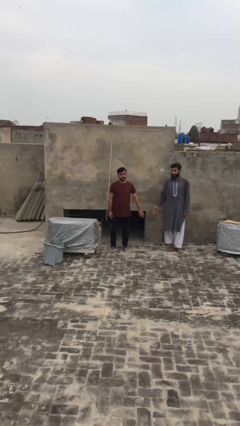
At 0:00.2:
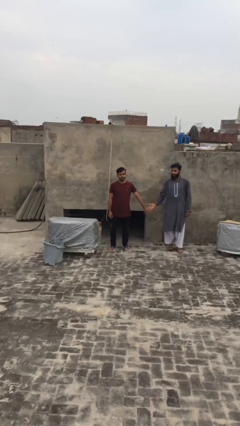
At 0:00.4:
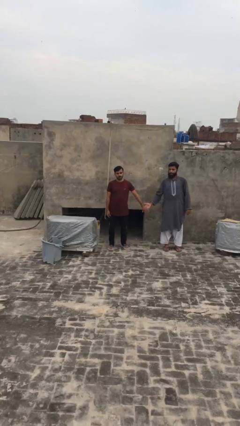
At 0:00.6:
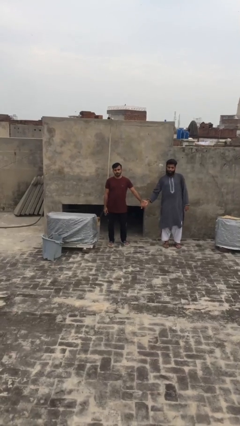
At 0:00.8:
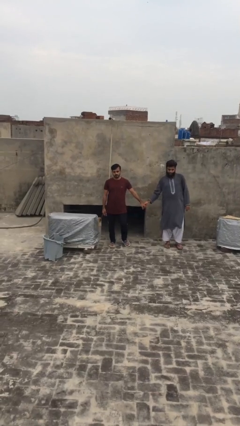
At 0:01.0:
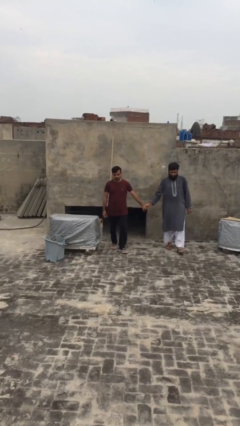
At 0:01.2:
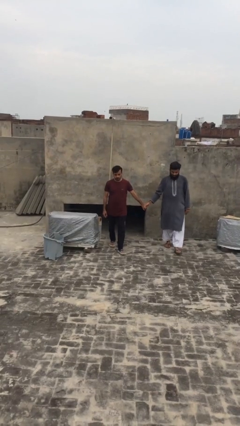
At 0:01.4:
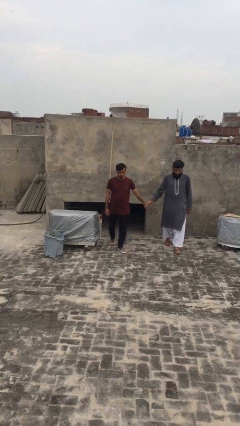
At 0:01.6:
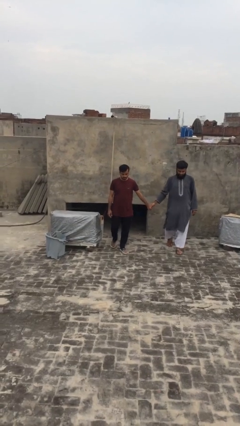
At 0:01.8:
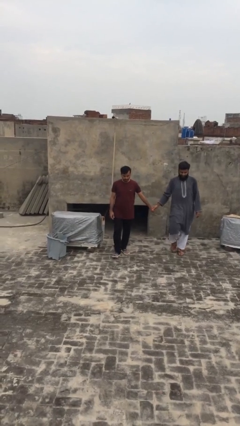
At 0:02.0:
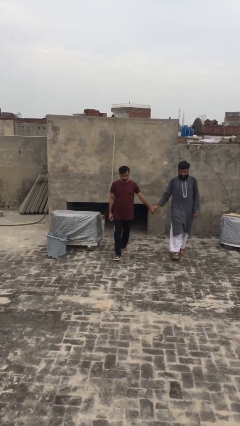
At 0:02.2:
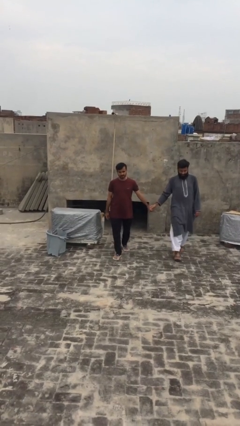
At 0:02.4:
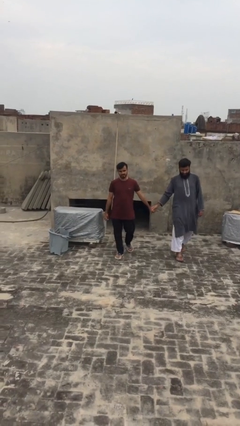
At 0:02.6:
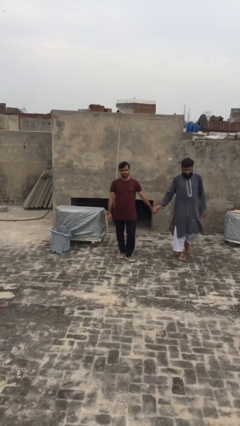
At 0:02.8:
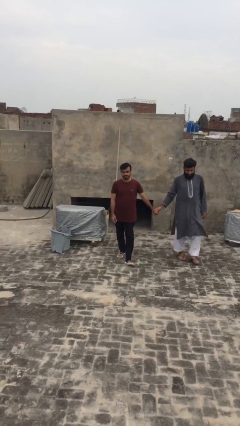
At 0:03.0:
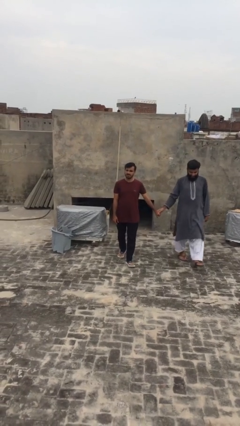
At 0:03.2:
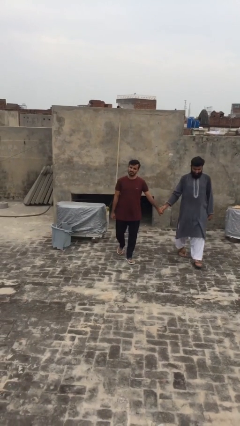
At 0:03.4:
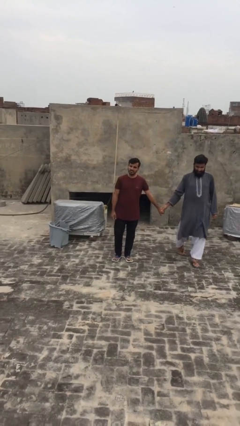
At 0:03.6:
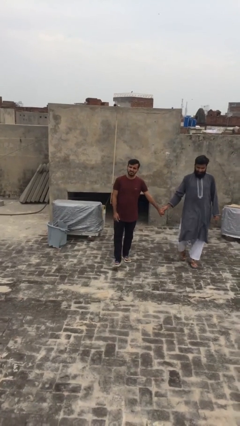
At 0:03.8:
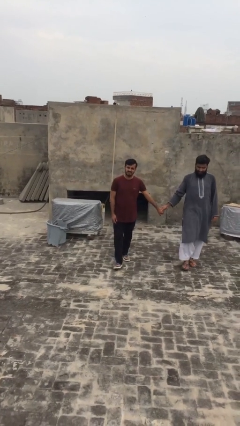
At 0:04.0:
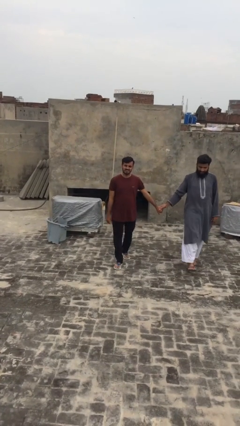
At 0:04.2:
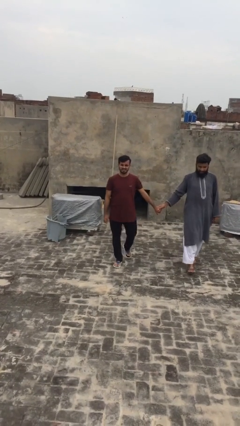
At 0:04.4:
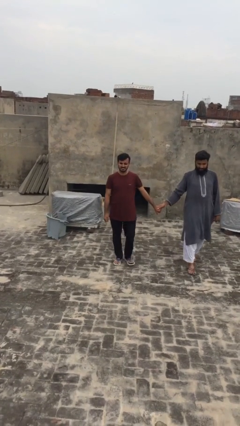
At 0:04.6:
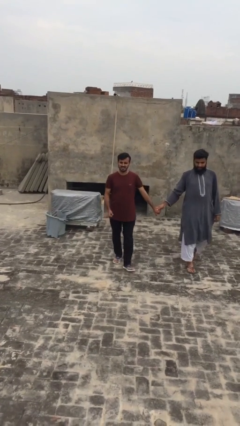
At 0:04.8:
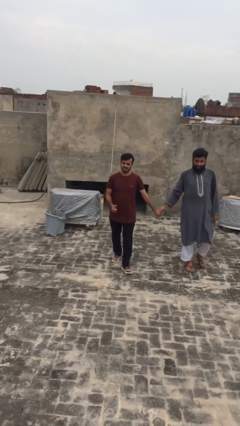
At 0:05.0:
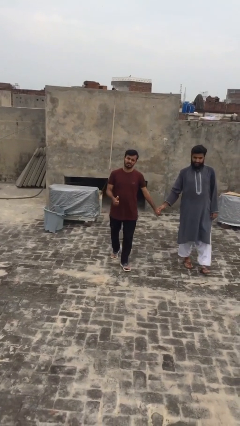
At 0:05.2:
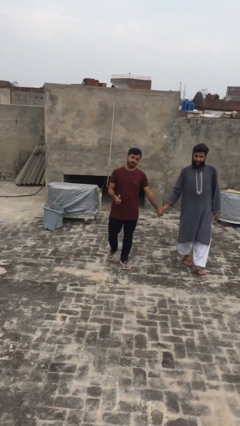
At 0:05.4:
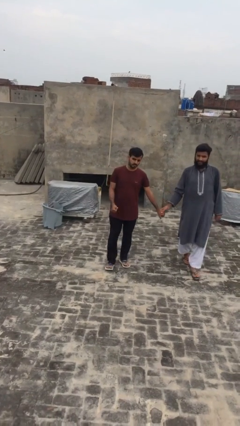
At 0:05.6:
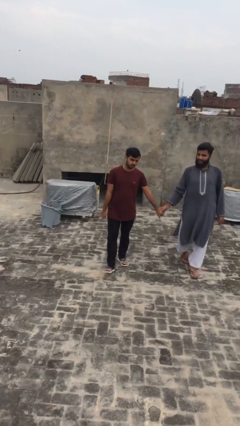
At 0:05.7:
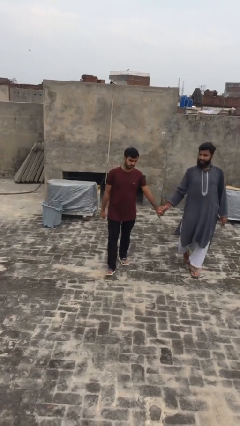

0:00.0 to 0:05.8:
person holds hand

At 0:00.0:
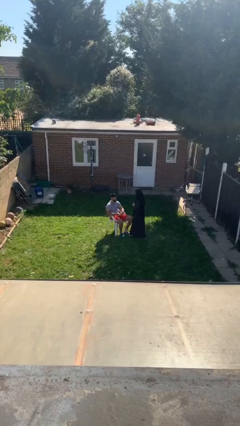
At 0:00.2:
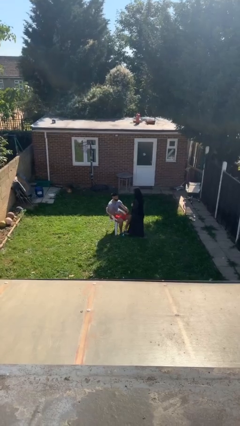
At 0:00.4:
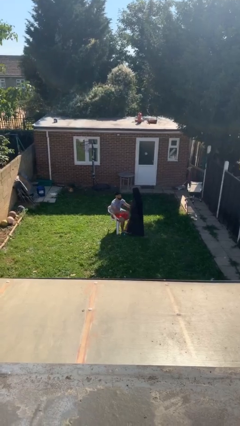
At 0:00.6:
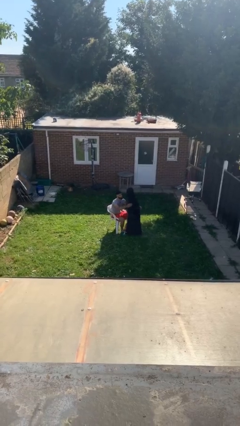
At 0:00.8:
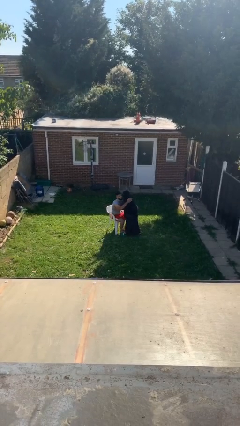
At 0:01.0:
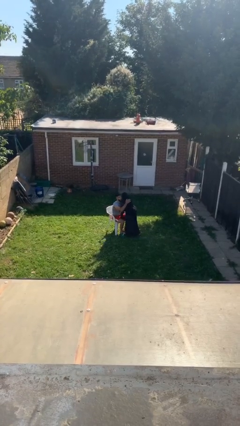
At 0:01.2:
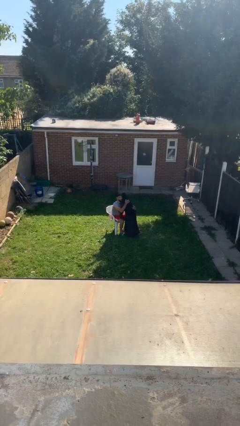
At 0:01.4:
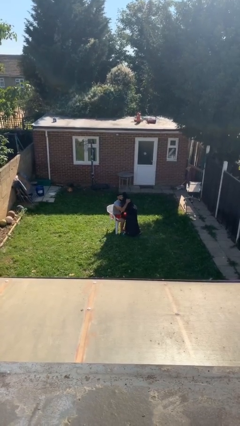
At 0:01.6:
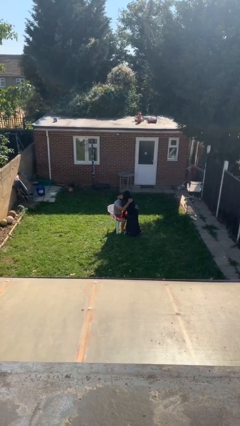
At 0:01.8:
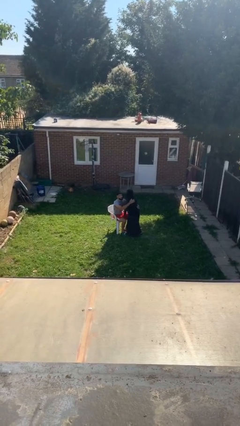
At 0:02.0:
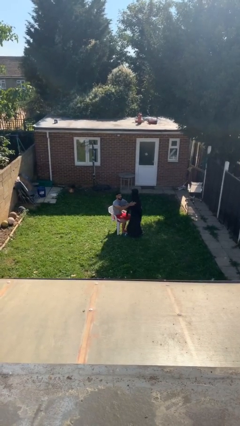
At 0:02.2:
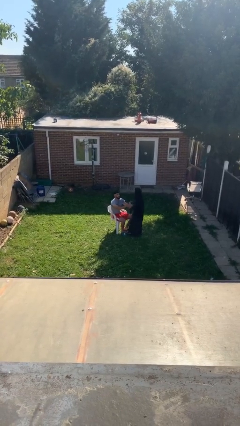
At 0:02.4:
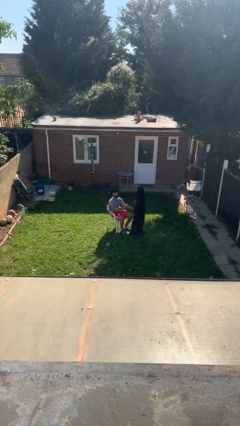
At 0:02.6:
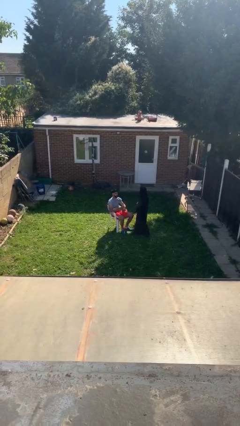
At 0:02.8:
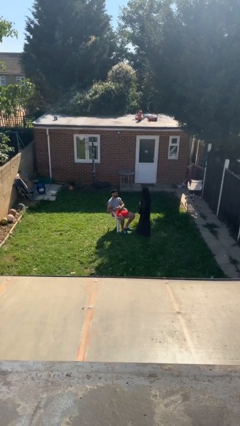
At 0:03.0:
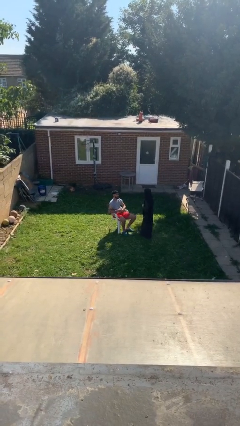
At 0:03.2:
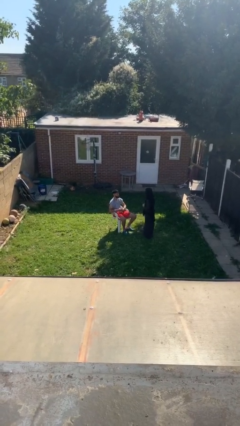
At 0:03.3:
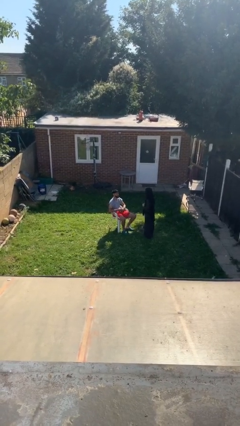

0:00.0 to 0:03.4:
person embraces person

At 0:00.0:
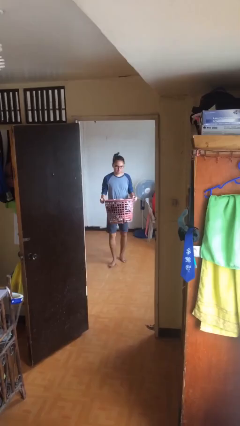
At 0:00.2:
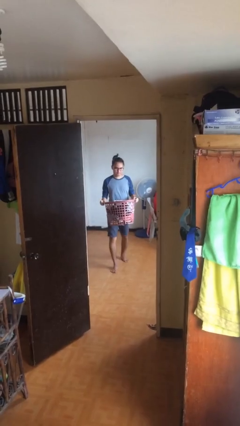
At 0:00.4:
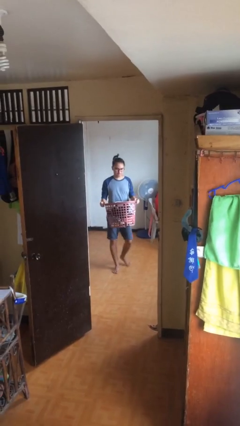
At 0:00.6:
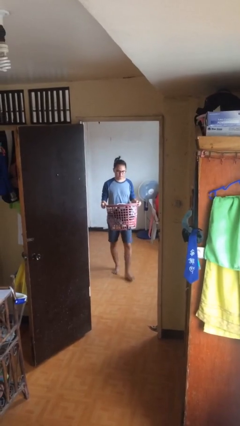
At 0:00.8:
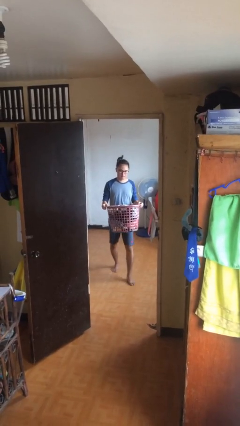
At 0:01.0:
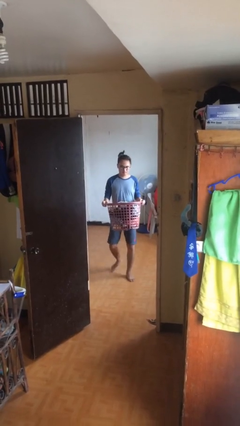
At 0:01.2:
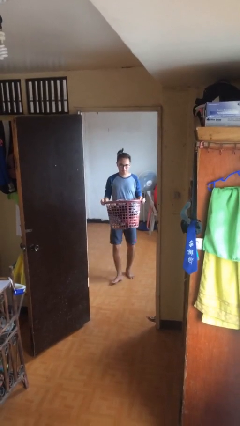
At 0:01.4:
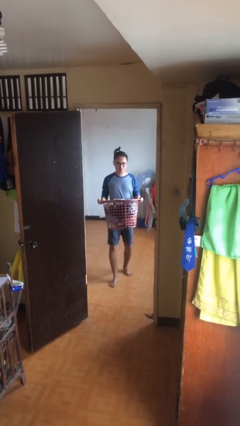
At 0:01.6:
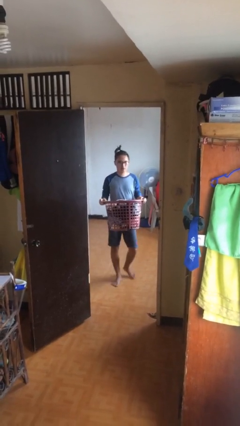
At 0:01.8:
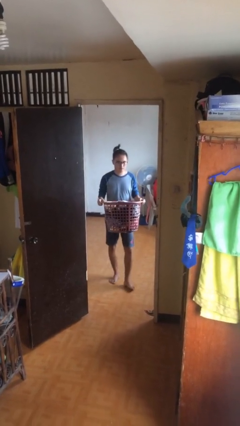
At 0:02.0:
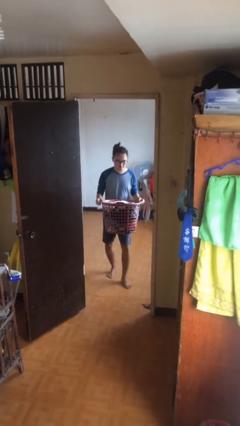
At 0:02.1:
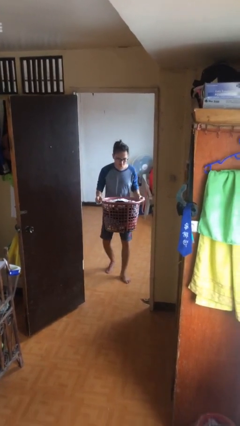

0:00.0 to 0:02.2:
person carries heavy object

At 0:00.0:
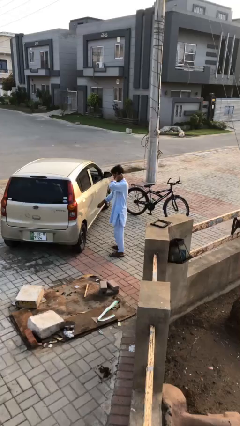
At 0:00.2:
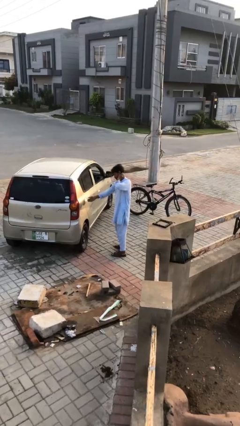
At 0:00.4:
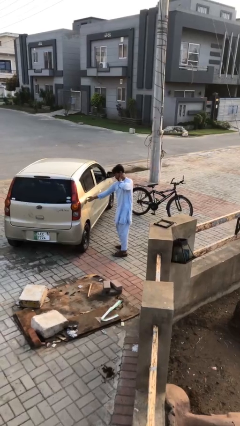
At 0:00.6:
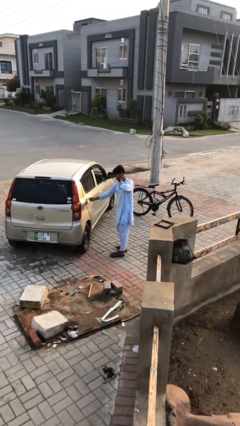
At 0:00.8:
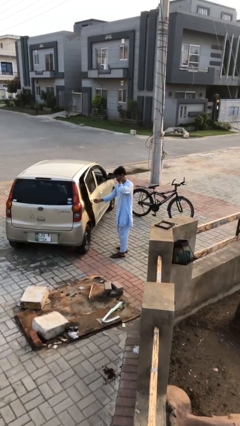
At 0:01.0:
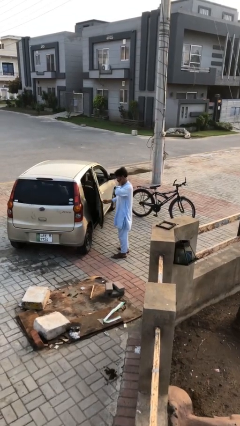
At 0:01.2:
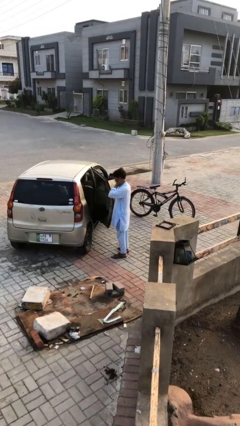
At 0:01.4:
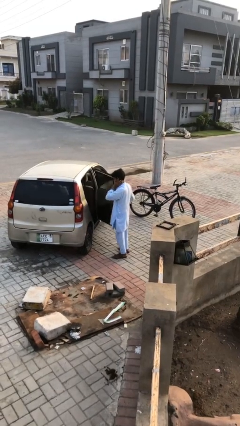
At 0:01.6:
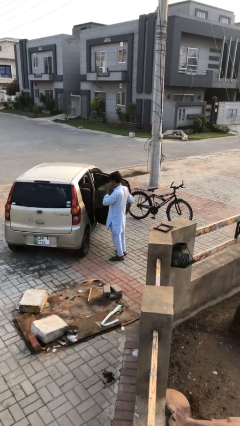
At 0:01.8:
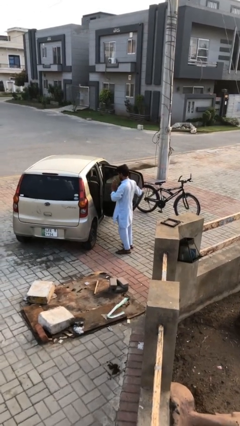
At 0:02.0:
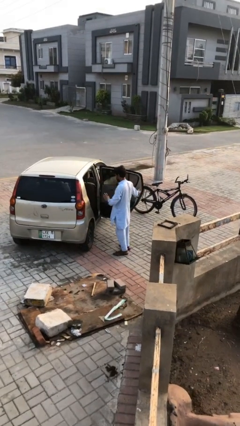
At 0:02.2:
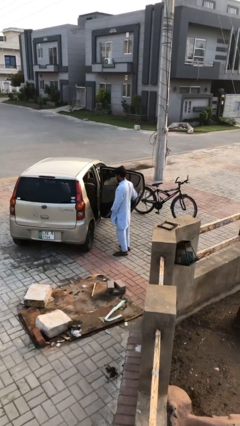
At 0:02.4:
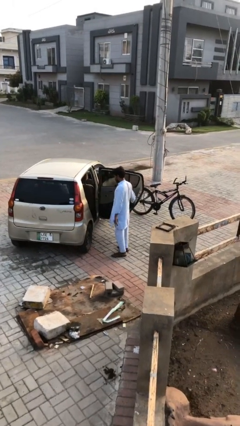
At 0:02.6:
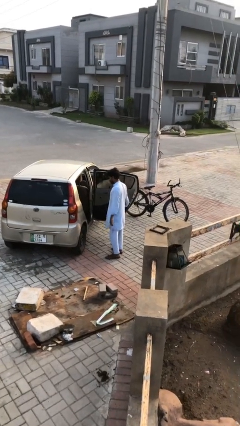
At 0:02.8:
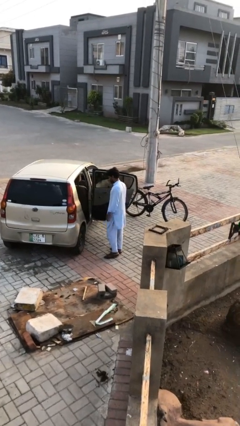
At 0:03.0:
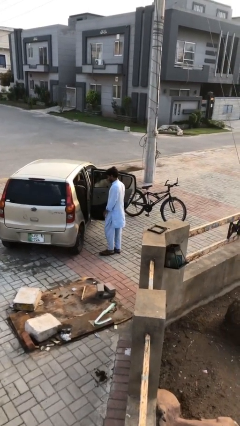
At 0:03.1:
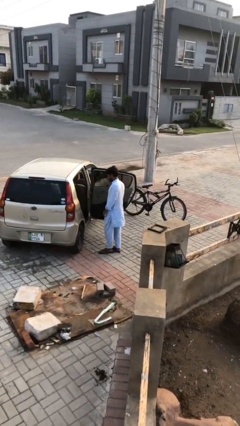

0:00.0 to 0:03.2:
person opens car door

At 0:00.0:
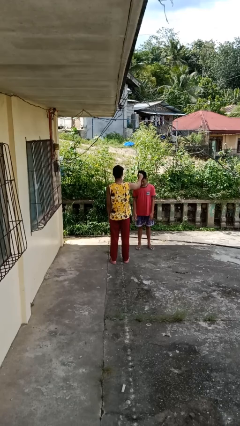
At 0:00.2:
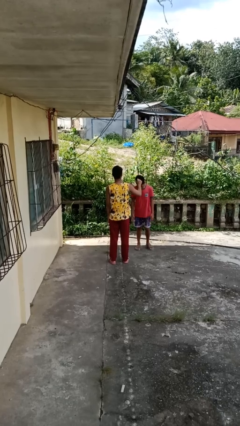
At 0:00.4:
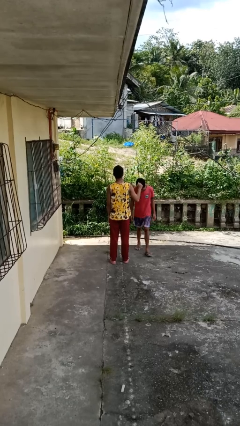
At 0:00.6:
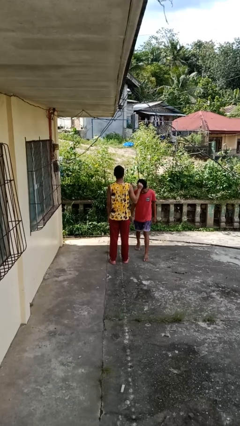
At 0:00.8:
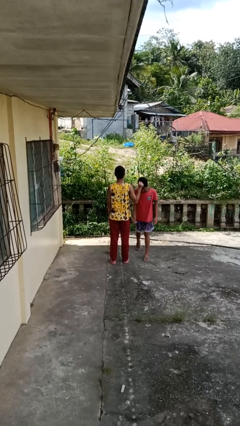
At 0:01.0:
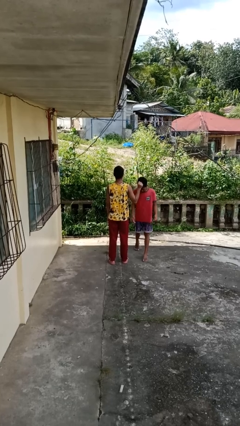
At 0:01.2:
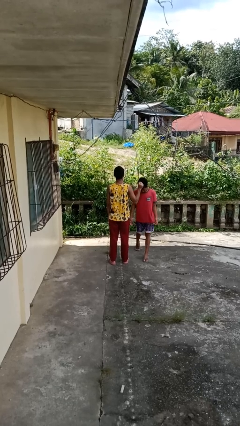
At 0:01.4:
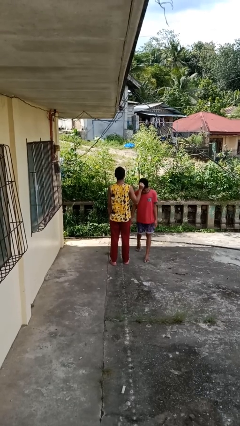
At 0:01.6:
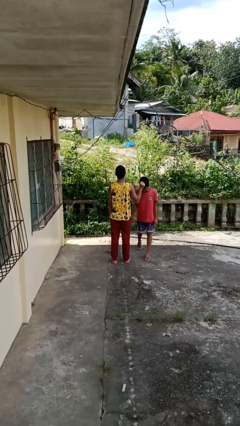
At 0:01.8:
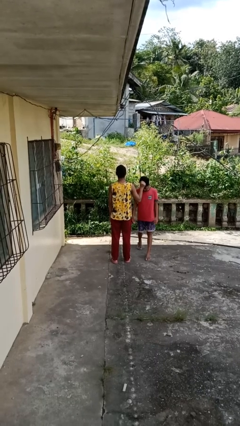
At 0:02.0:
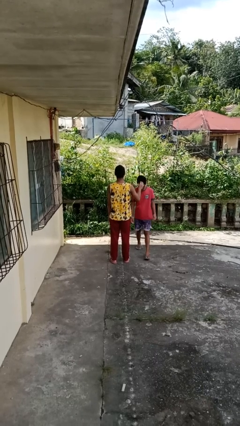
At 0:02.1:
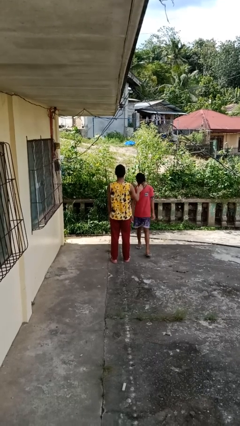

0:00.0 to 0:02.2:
person grabs person by hair

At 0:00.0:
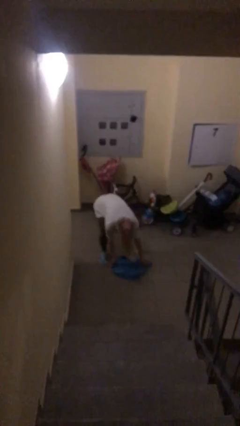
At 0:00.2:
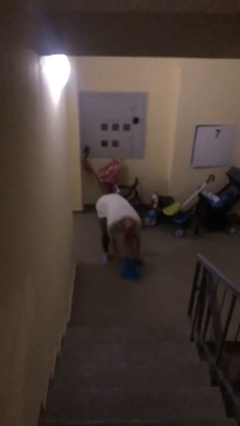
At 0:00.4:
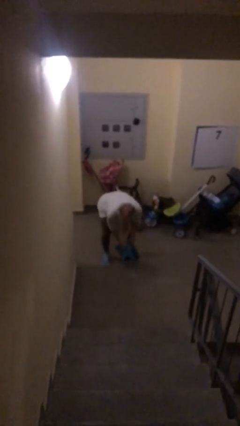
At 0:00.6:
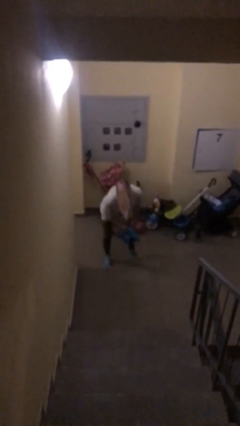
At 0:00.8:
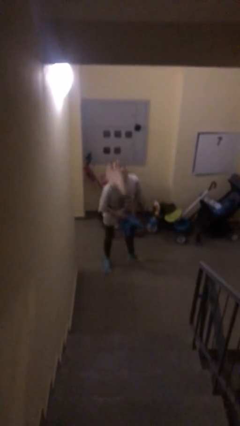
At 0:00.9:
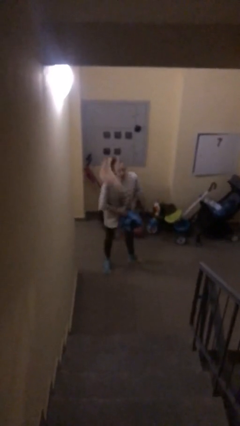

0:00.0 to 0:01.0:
person picks up object from floor
